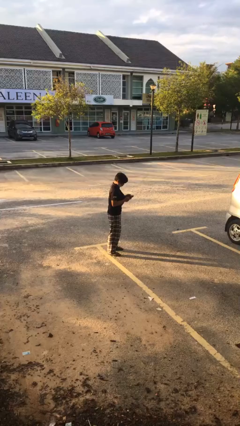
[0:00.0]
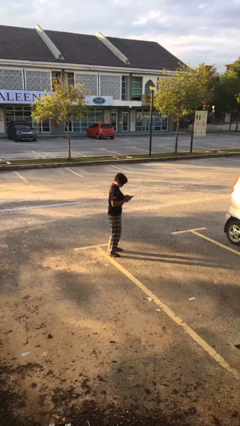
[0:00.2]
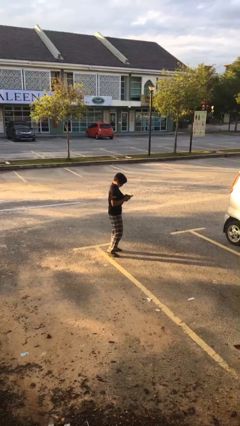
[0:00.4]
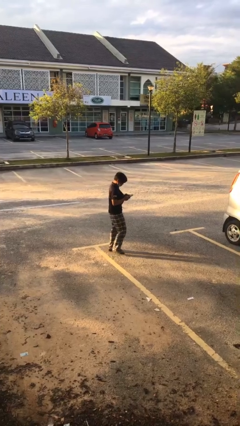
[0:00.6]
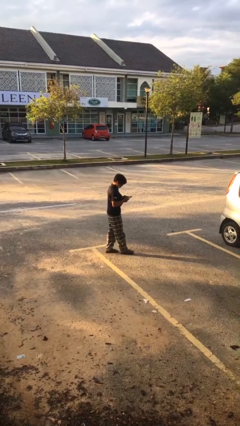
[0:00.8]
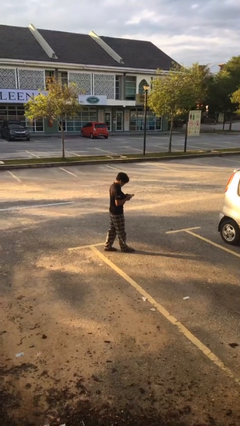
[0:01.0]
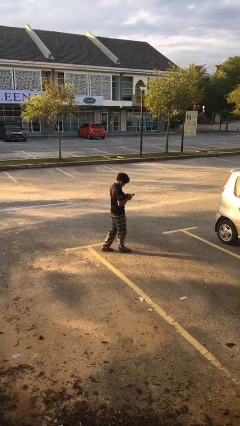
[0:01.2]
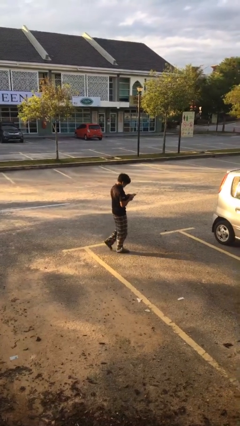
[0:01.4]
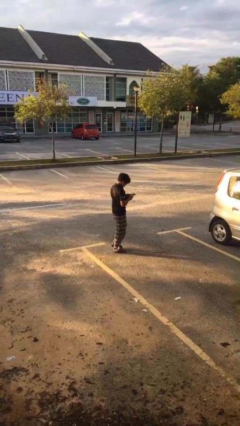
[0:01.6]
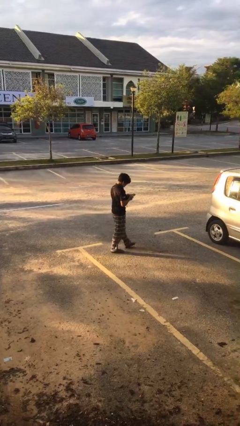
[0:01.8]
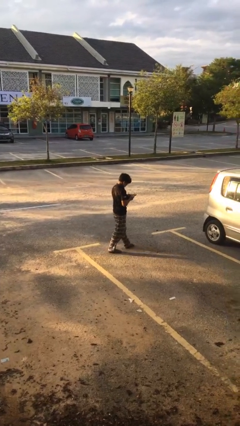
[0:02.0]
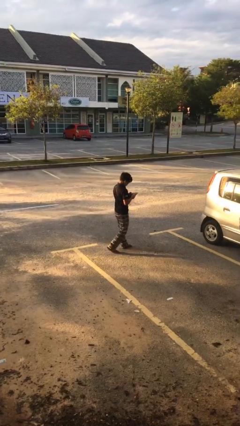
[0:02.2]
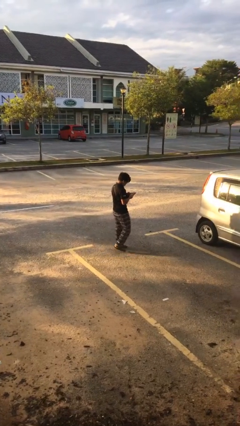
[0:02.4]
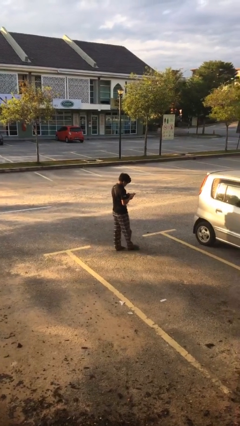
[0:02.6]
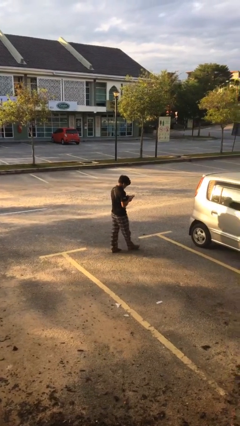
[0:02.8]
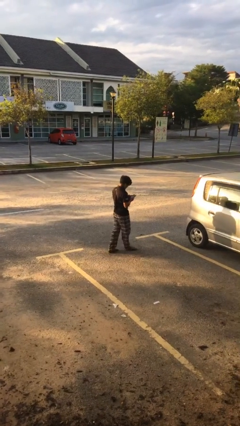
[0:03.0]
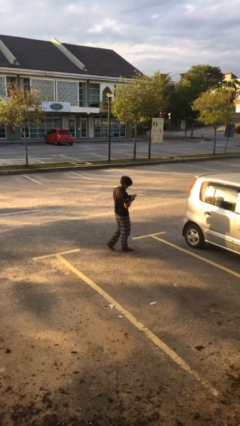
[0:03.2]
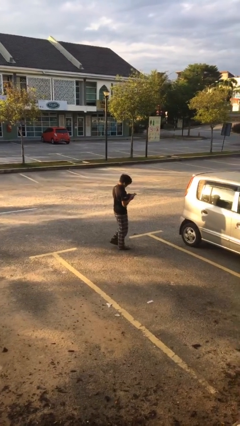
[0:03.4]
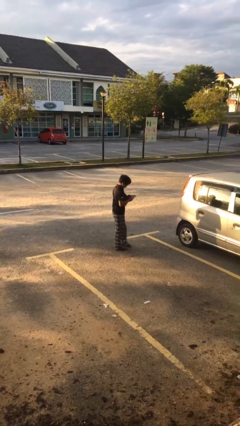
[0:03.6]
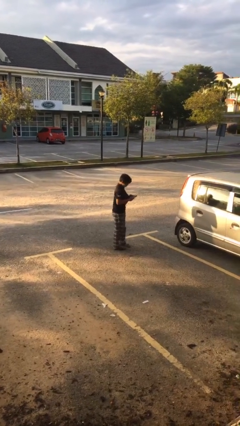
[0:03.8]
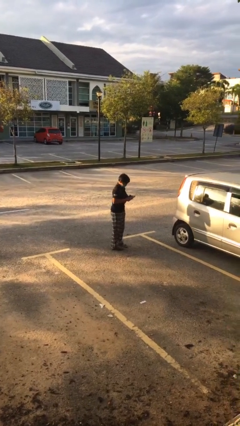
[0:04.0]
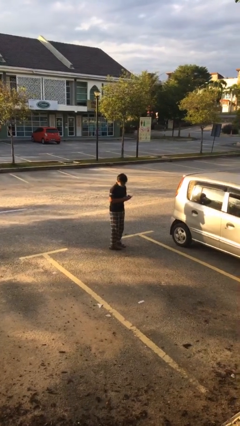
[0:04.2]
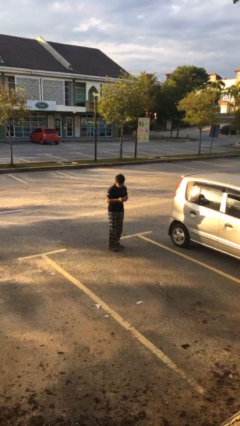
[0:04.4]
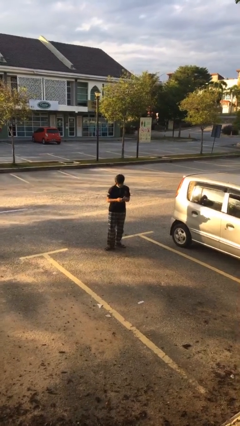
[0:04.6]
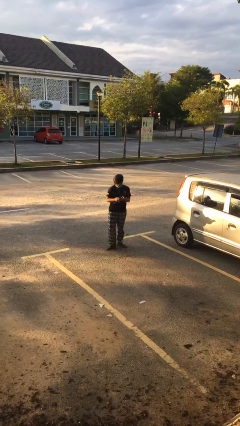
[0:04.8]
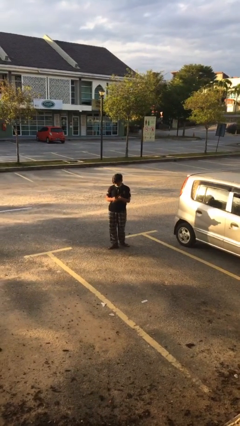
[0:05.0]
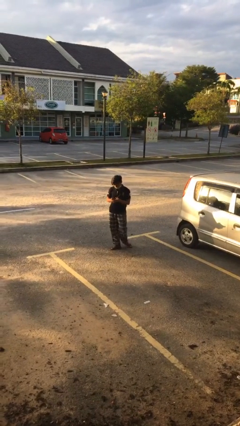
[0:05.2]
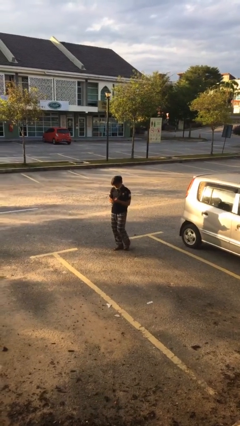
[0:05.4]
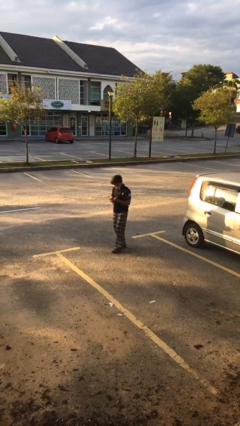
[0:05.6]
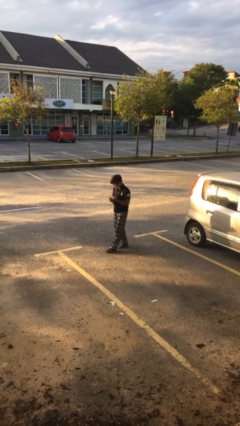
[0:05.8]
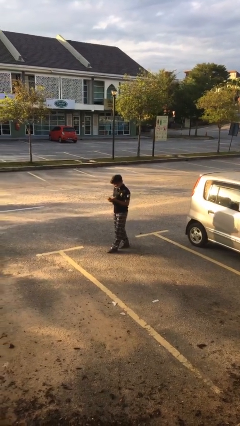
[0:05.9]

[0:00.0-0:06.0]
person texts on phone

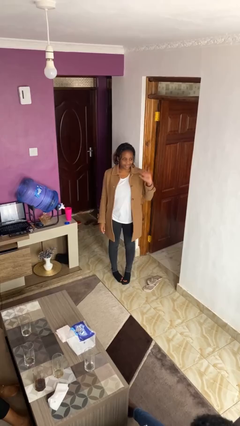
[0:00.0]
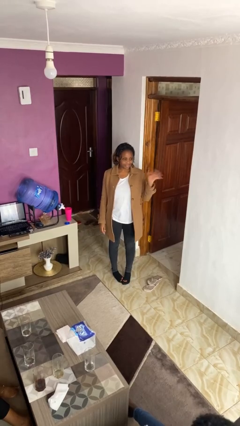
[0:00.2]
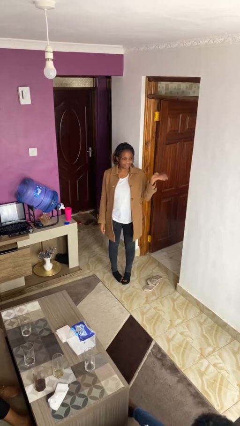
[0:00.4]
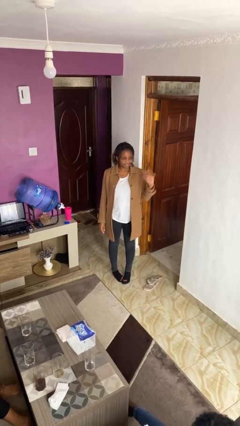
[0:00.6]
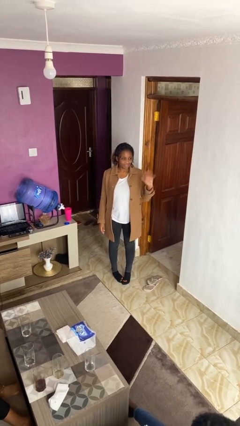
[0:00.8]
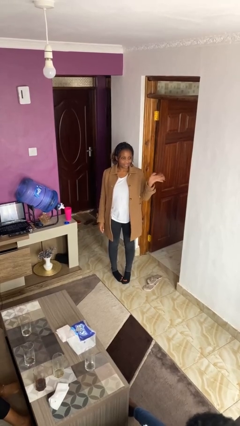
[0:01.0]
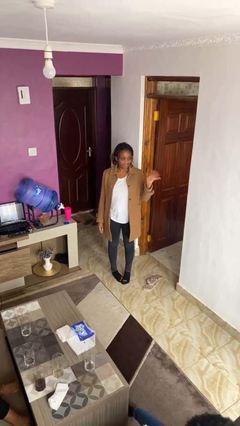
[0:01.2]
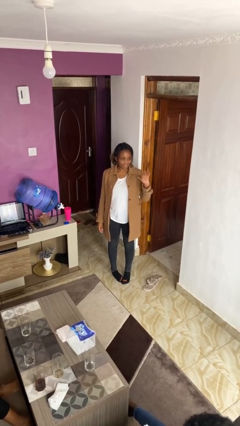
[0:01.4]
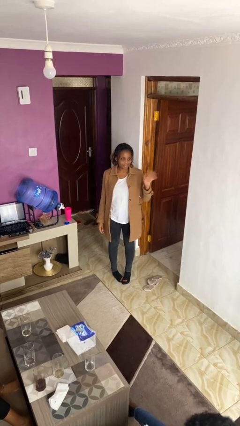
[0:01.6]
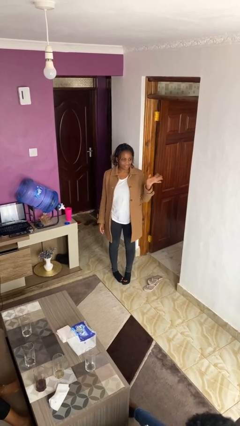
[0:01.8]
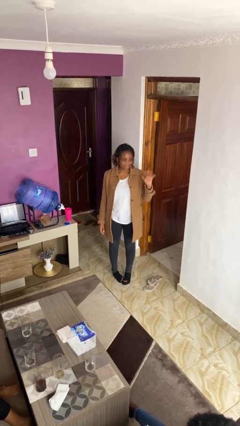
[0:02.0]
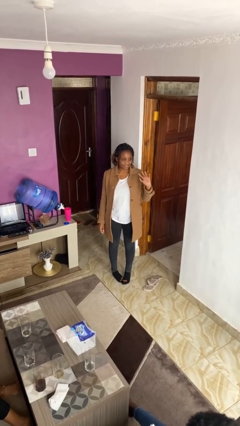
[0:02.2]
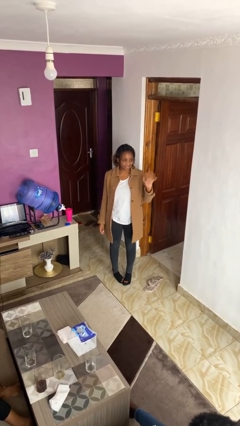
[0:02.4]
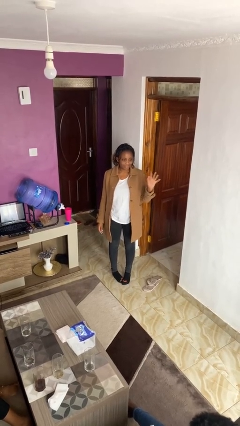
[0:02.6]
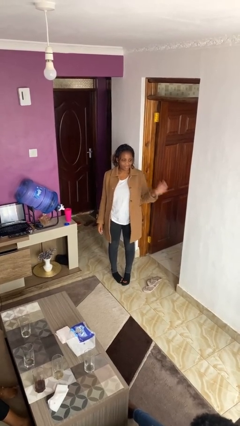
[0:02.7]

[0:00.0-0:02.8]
person waves at person

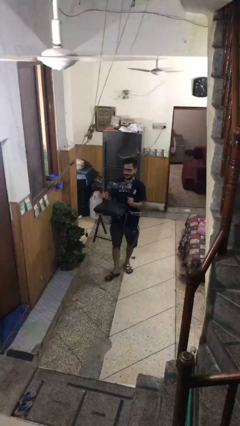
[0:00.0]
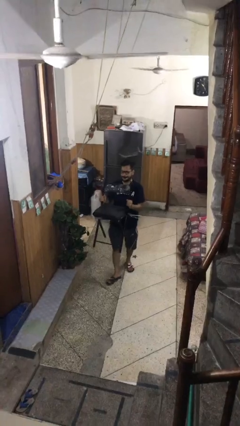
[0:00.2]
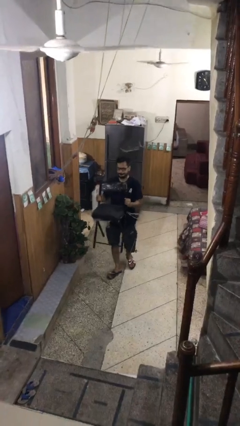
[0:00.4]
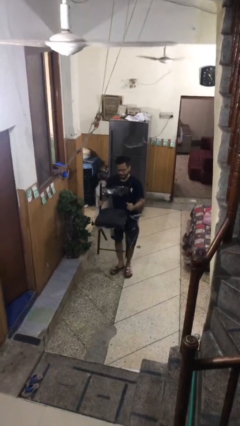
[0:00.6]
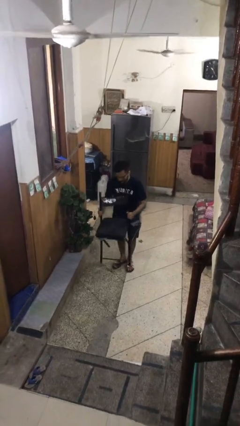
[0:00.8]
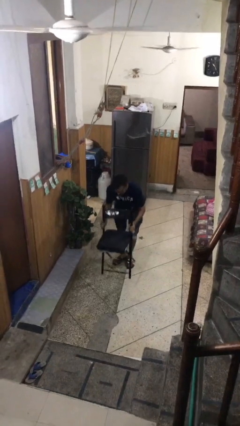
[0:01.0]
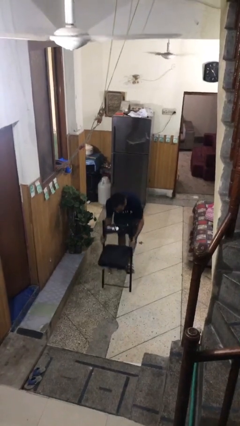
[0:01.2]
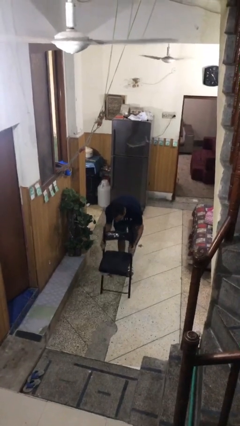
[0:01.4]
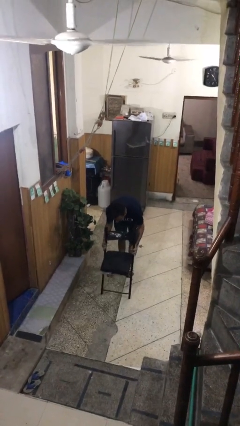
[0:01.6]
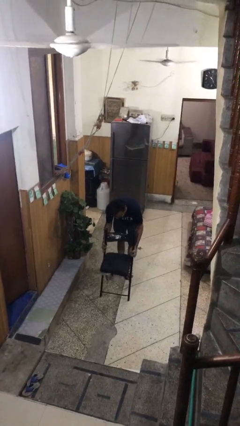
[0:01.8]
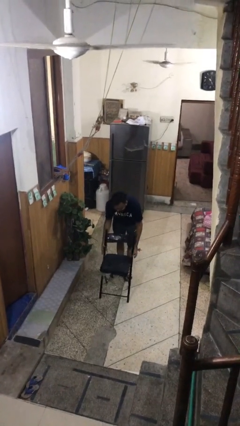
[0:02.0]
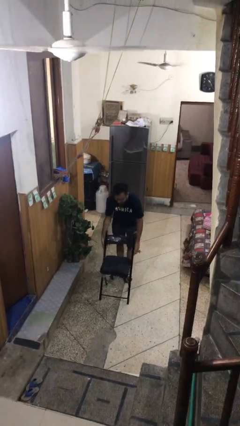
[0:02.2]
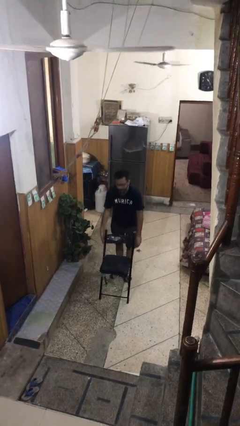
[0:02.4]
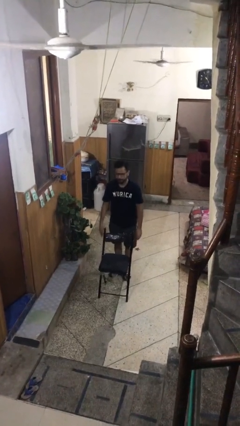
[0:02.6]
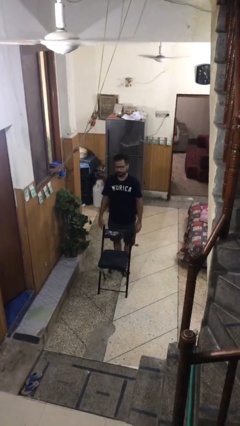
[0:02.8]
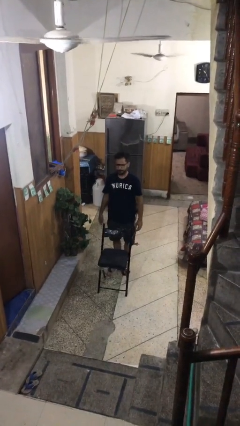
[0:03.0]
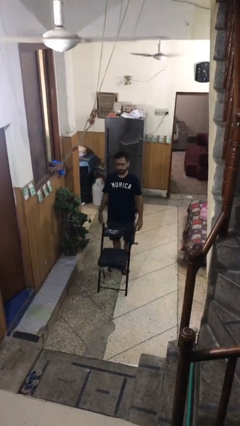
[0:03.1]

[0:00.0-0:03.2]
person puts down object on floor

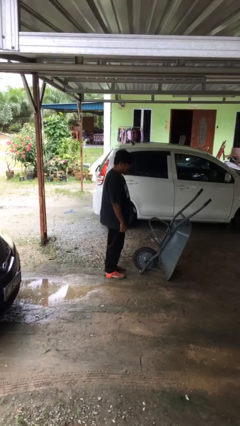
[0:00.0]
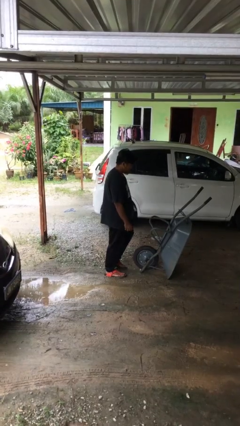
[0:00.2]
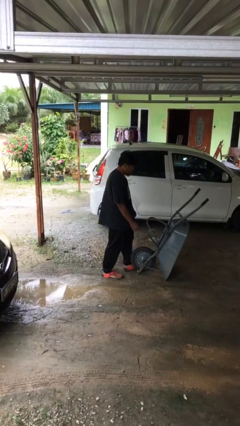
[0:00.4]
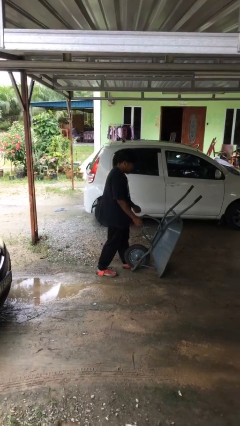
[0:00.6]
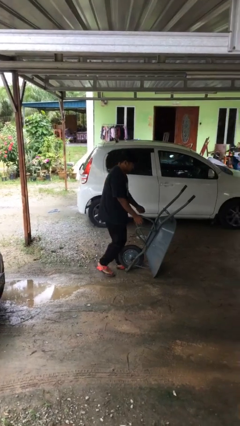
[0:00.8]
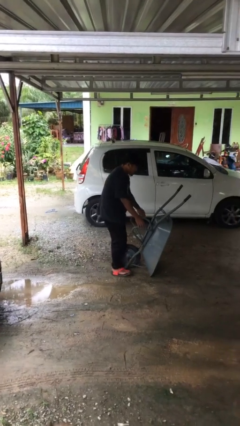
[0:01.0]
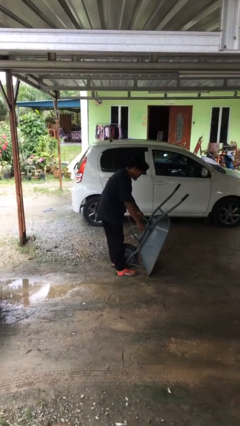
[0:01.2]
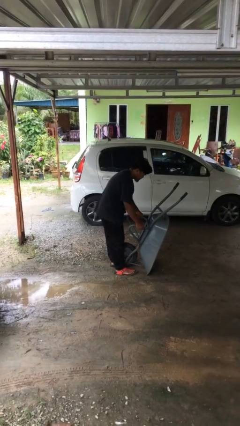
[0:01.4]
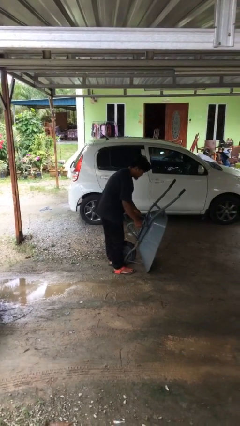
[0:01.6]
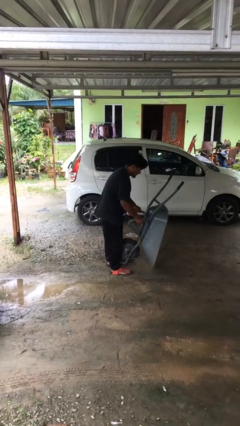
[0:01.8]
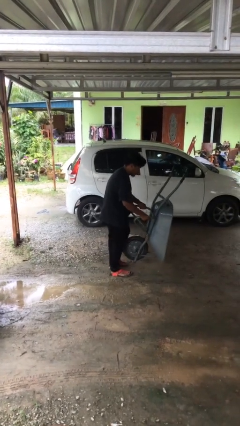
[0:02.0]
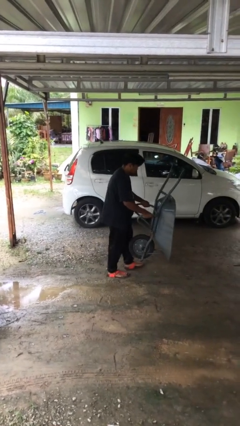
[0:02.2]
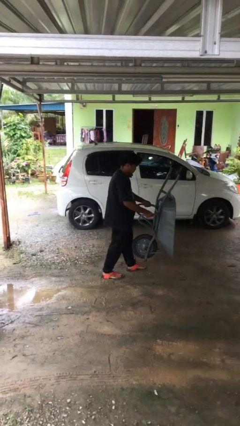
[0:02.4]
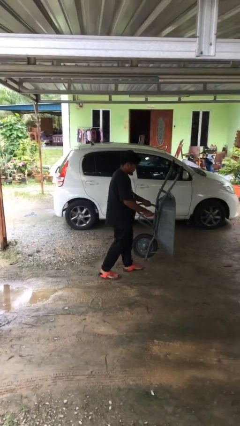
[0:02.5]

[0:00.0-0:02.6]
person picks up object from floor

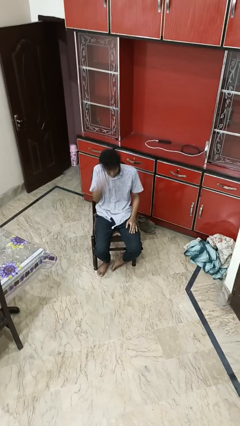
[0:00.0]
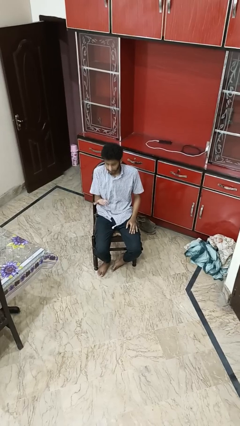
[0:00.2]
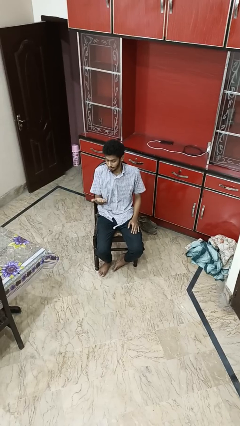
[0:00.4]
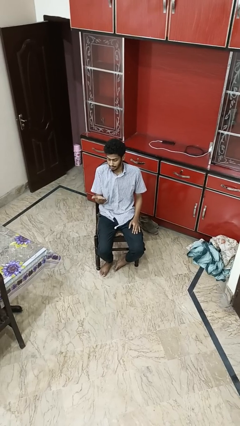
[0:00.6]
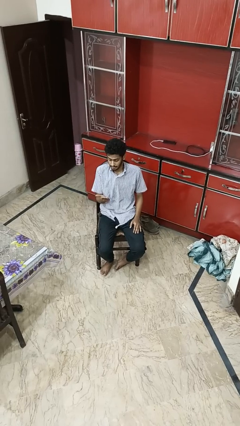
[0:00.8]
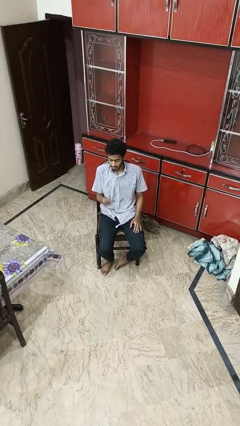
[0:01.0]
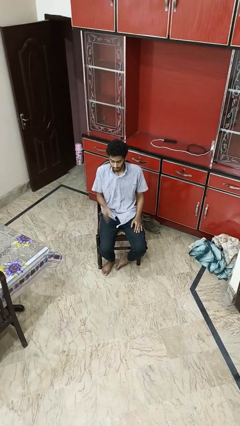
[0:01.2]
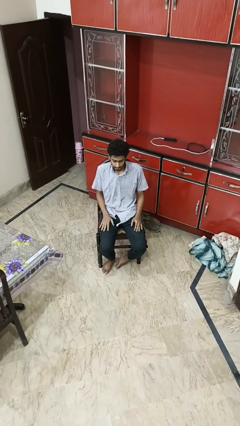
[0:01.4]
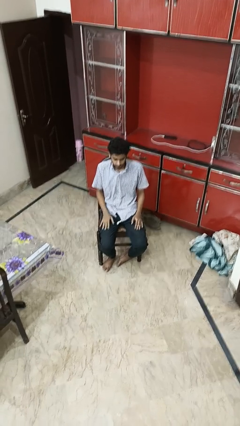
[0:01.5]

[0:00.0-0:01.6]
person swats bug

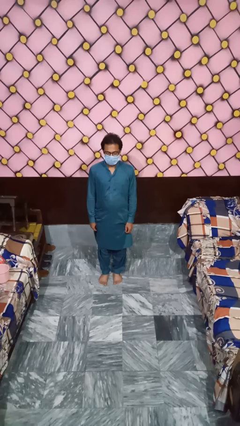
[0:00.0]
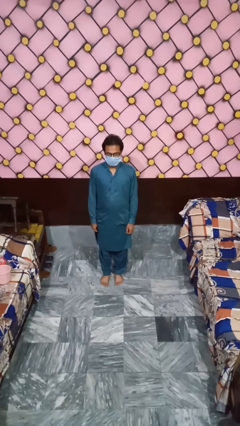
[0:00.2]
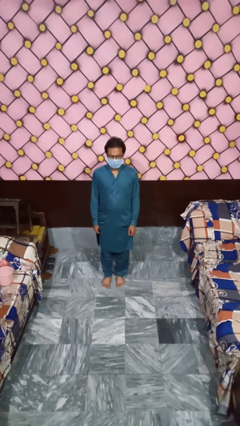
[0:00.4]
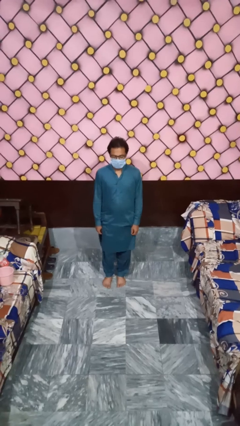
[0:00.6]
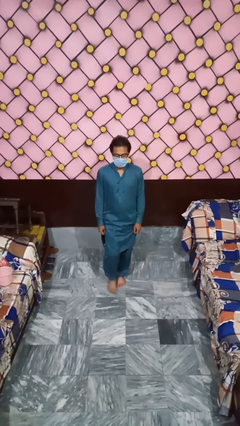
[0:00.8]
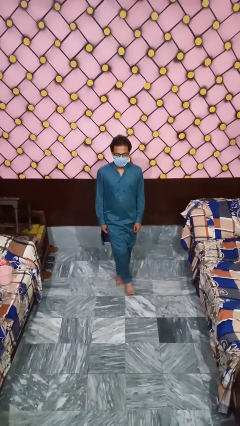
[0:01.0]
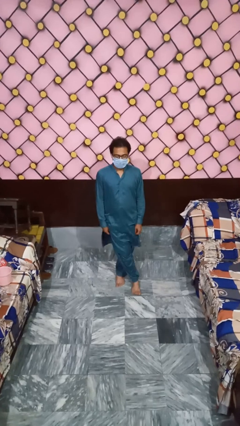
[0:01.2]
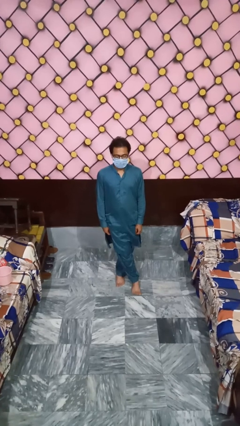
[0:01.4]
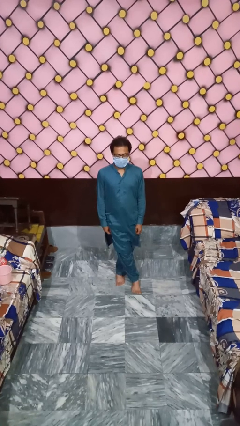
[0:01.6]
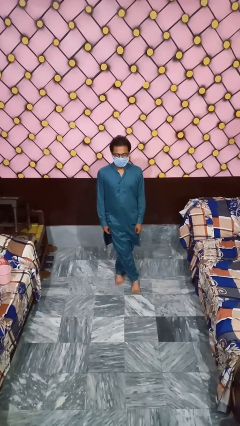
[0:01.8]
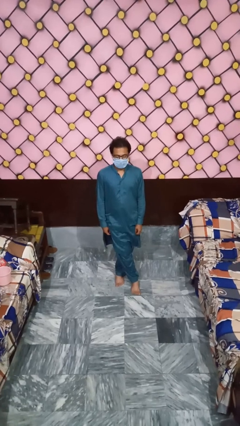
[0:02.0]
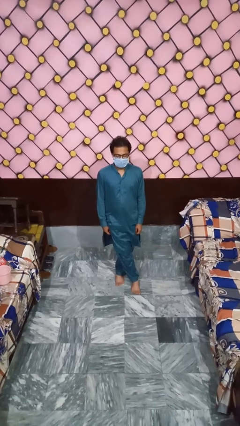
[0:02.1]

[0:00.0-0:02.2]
person crosses legs
